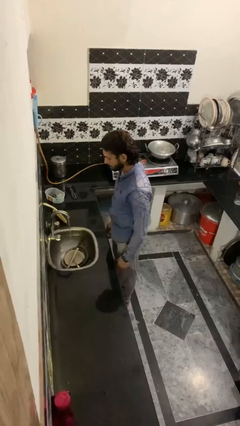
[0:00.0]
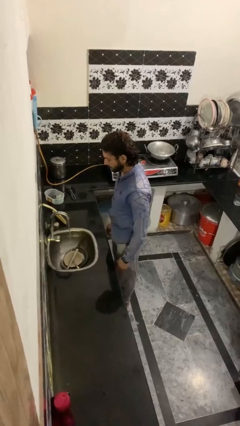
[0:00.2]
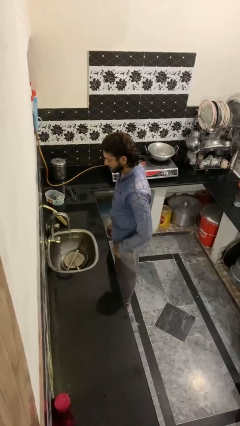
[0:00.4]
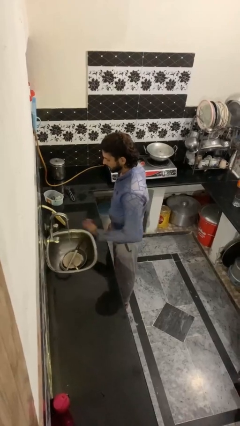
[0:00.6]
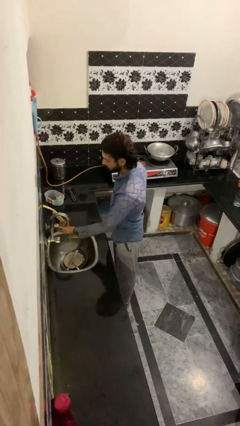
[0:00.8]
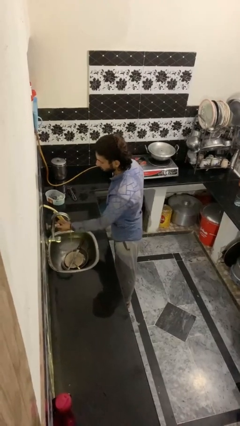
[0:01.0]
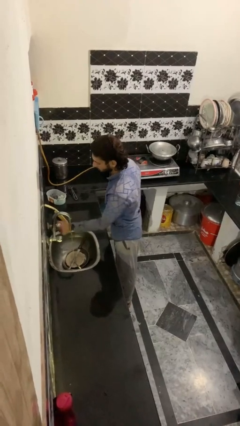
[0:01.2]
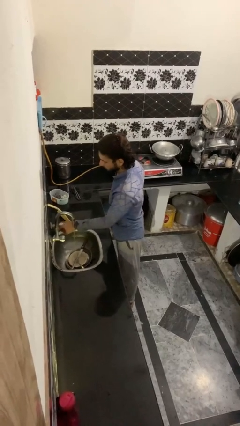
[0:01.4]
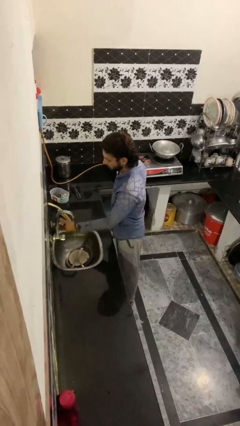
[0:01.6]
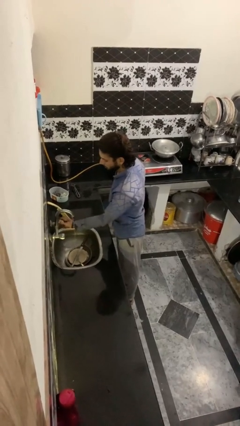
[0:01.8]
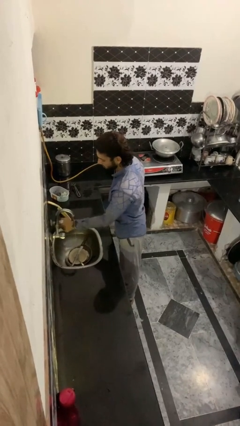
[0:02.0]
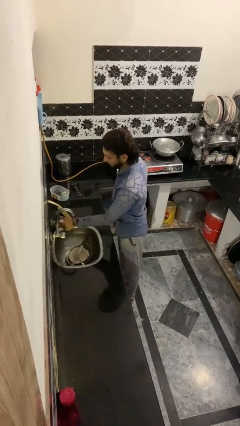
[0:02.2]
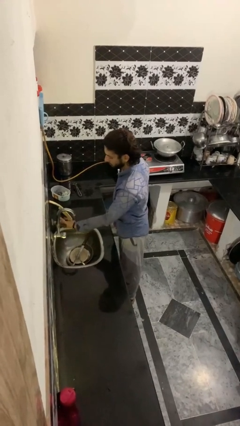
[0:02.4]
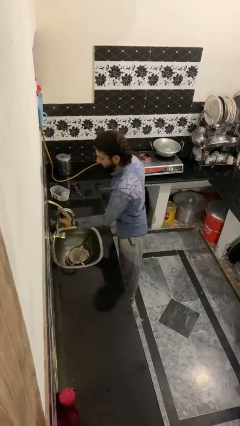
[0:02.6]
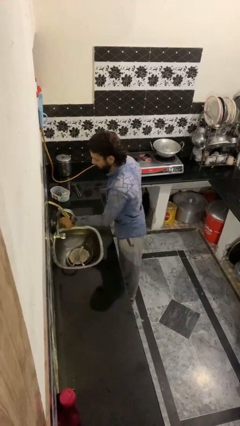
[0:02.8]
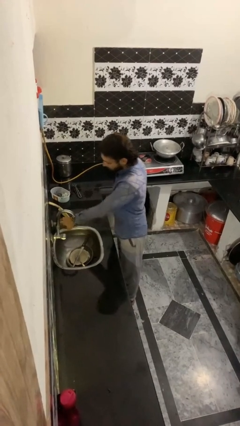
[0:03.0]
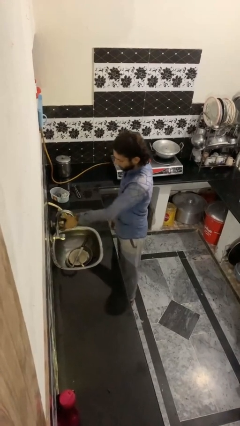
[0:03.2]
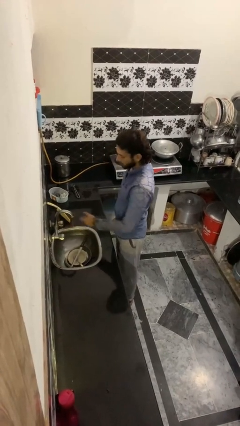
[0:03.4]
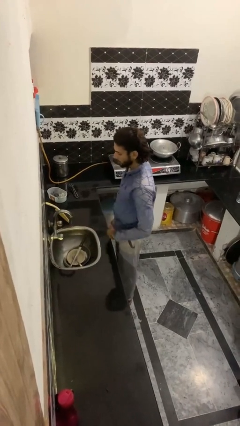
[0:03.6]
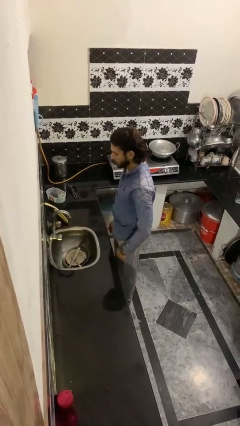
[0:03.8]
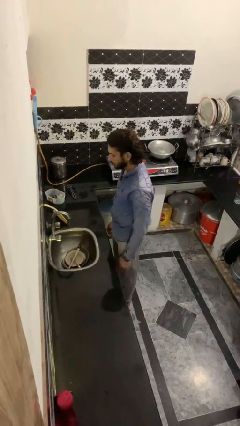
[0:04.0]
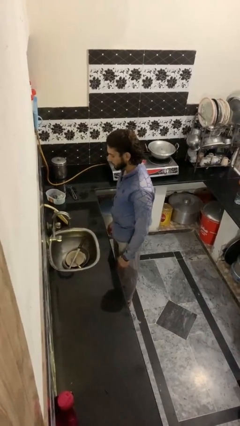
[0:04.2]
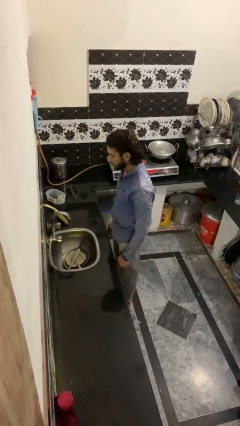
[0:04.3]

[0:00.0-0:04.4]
person turns off faucet

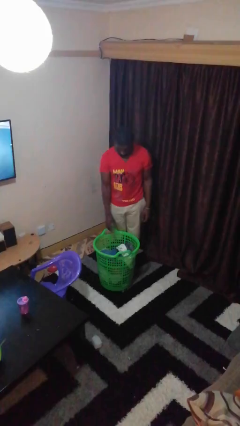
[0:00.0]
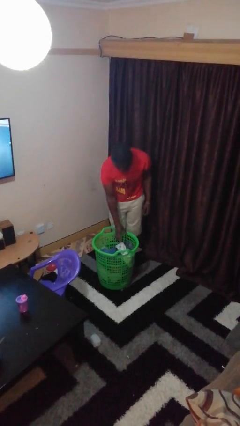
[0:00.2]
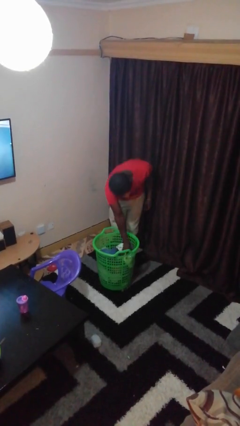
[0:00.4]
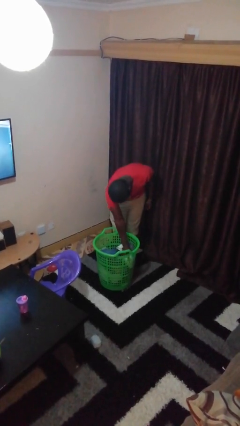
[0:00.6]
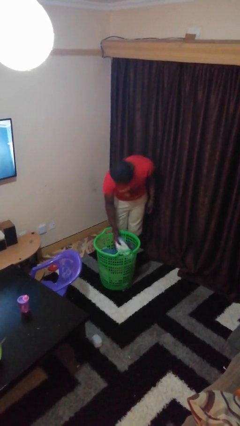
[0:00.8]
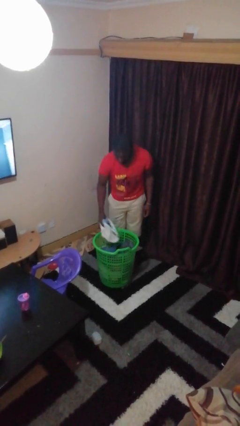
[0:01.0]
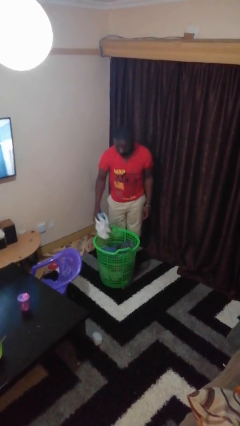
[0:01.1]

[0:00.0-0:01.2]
person takes object from basket

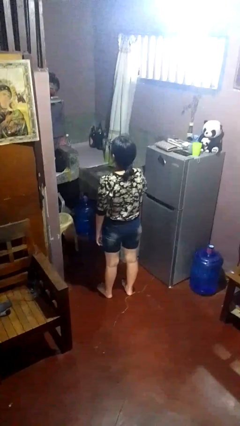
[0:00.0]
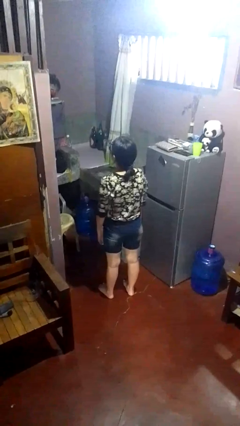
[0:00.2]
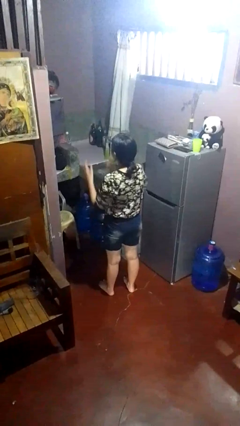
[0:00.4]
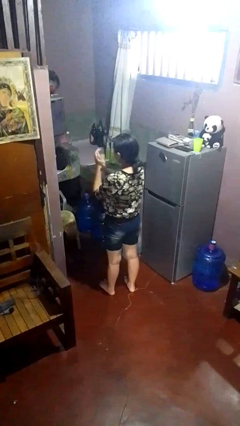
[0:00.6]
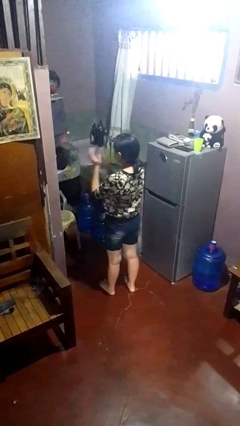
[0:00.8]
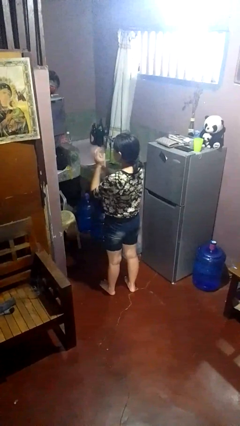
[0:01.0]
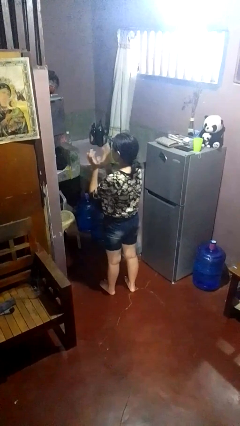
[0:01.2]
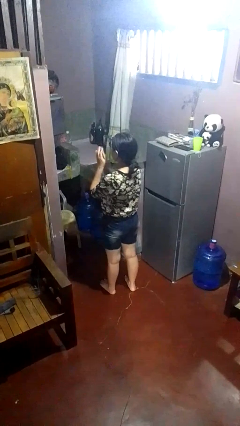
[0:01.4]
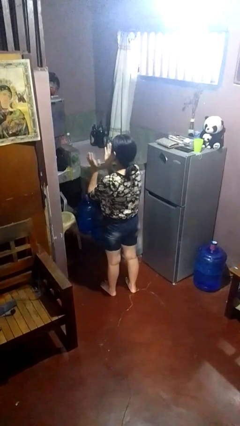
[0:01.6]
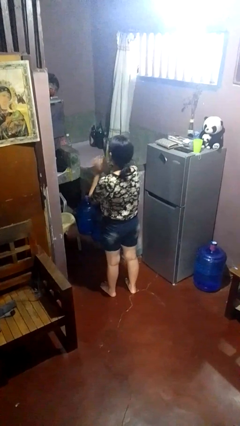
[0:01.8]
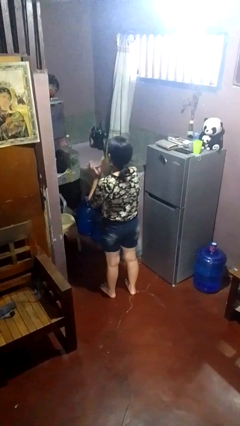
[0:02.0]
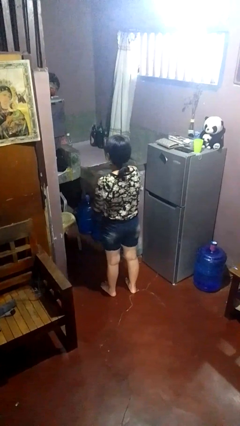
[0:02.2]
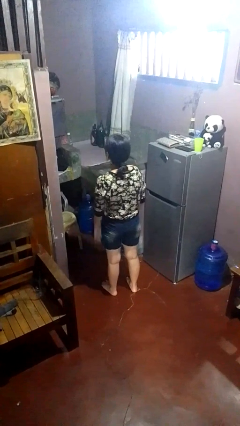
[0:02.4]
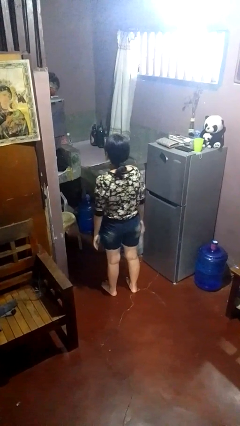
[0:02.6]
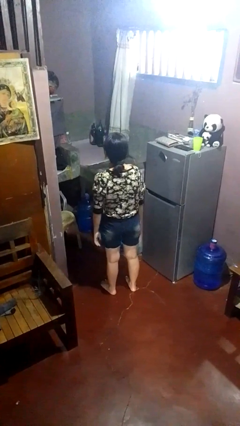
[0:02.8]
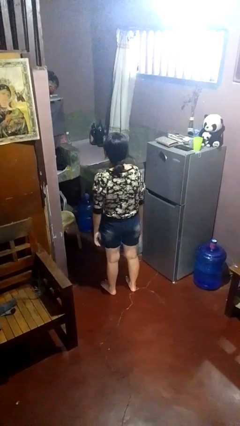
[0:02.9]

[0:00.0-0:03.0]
person claps hands

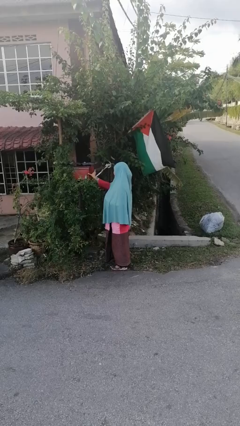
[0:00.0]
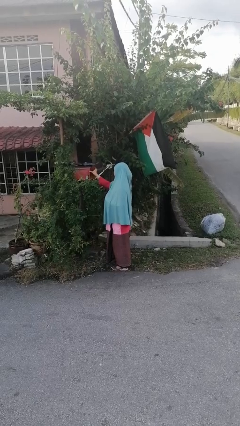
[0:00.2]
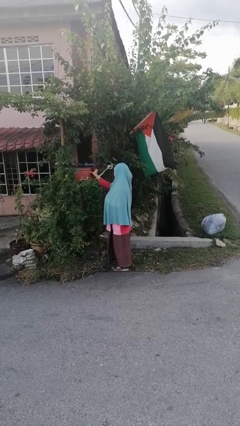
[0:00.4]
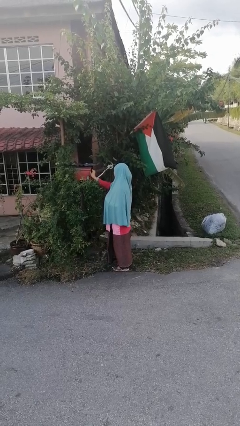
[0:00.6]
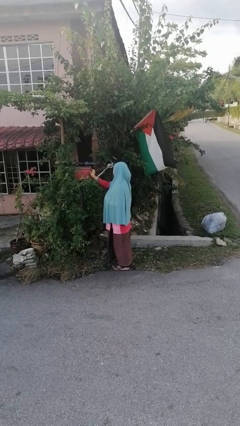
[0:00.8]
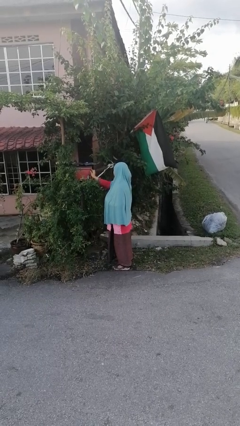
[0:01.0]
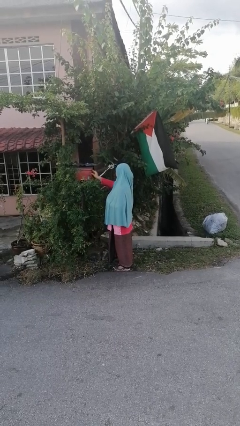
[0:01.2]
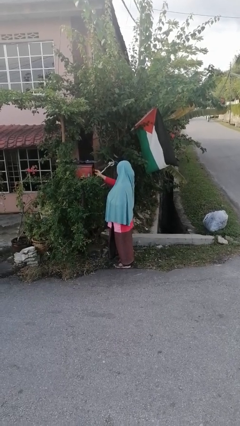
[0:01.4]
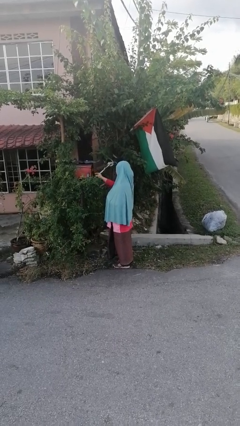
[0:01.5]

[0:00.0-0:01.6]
person closes mailbox

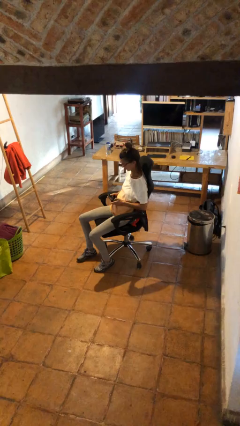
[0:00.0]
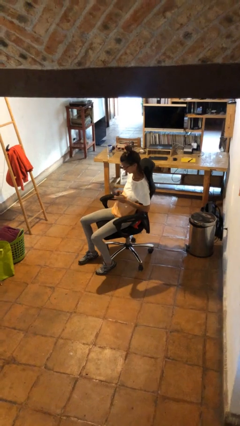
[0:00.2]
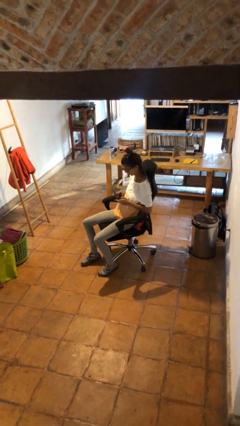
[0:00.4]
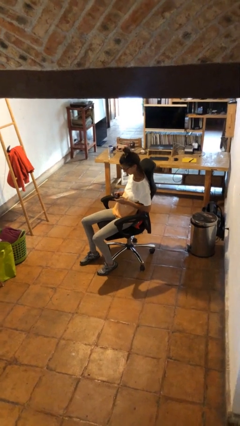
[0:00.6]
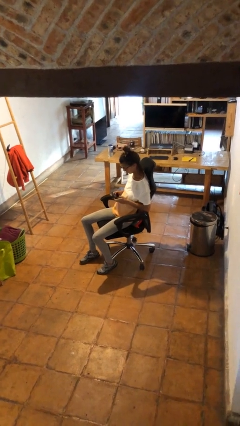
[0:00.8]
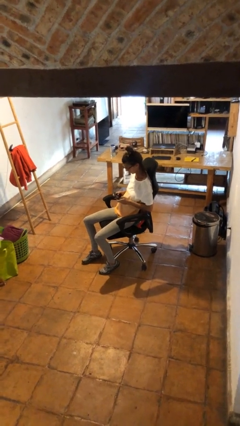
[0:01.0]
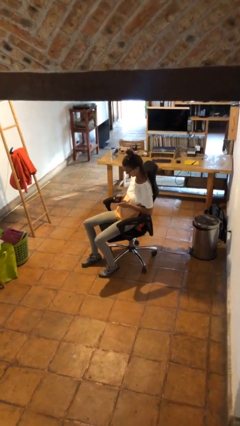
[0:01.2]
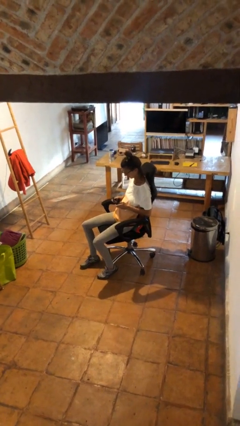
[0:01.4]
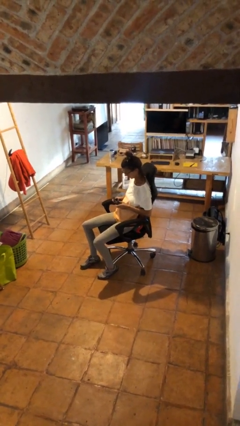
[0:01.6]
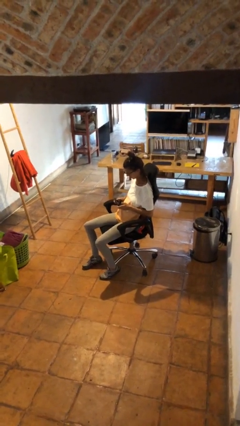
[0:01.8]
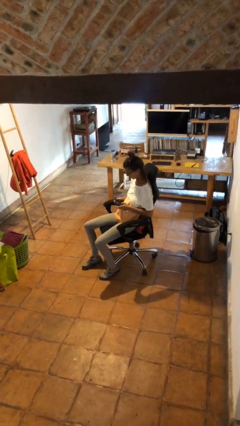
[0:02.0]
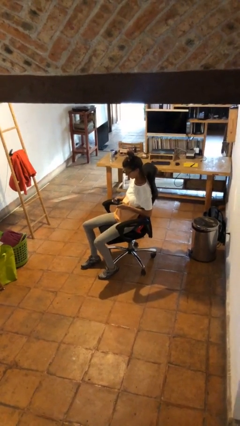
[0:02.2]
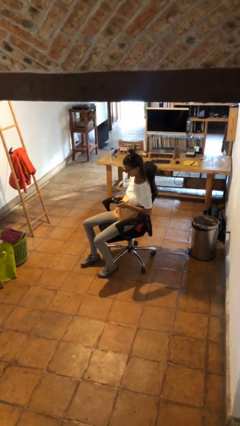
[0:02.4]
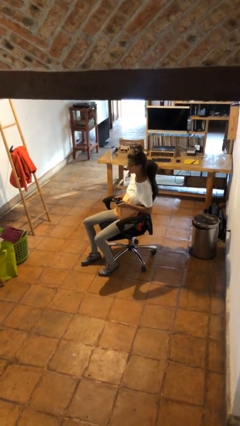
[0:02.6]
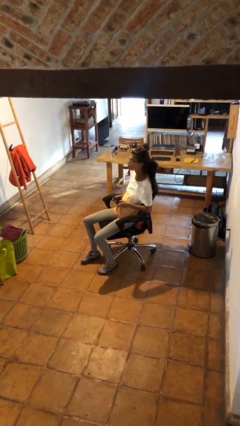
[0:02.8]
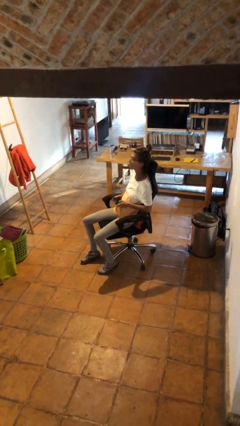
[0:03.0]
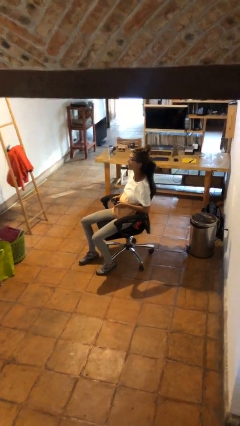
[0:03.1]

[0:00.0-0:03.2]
person interacts with handheld game

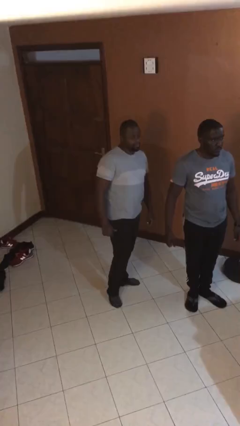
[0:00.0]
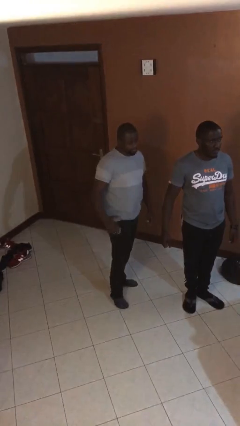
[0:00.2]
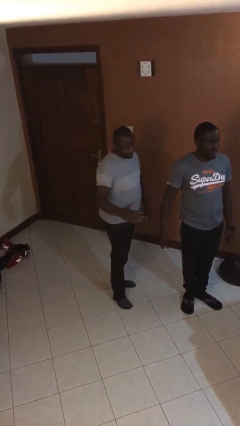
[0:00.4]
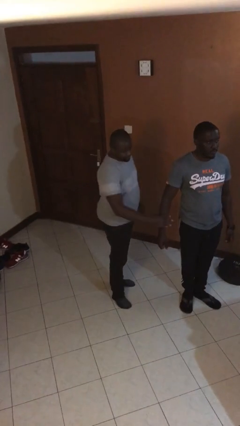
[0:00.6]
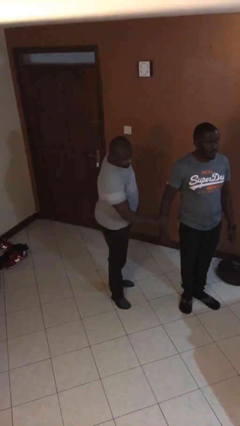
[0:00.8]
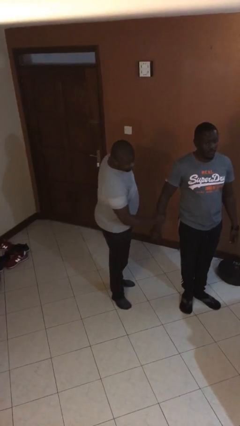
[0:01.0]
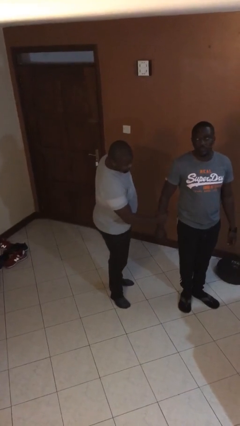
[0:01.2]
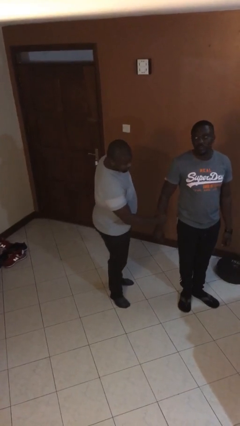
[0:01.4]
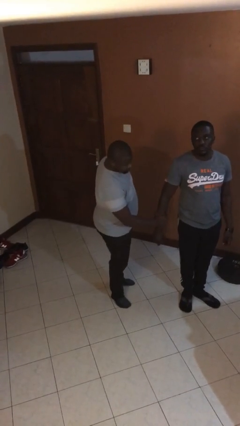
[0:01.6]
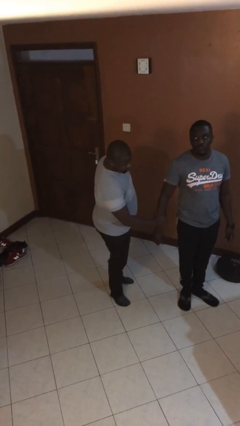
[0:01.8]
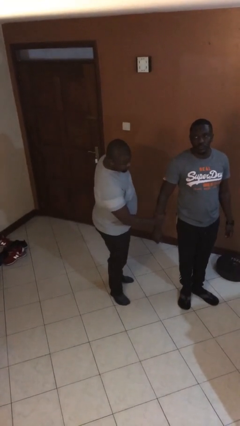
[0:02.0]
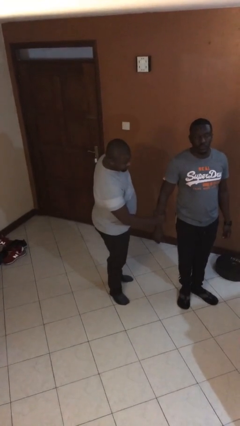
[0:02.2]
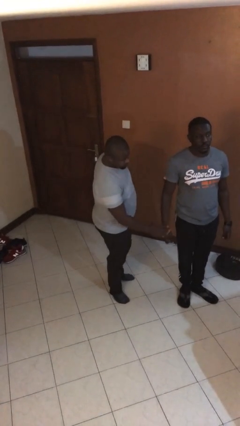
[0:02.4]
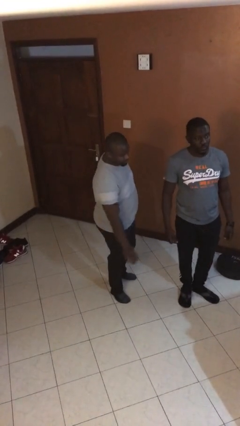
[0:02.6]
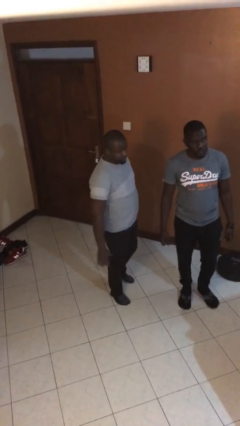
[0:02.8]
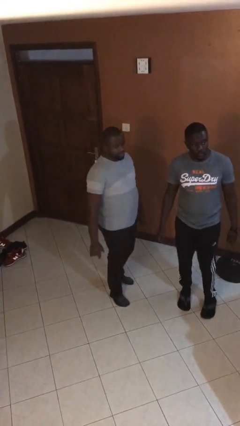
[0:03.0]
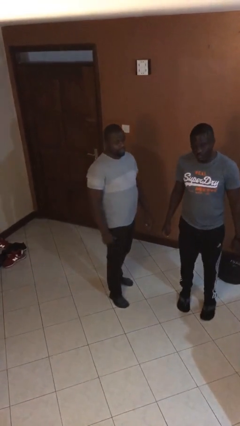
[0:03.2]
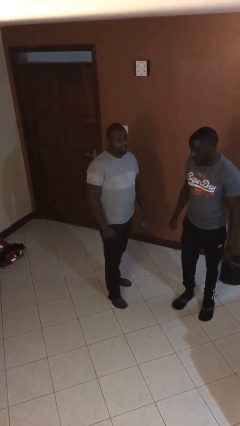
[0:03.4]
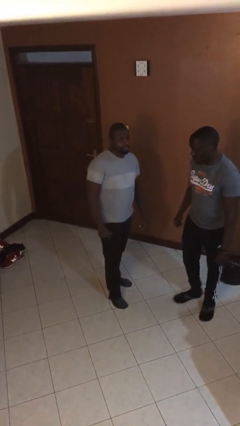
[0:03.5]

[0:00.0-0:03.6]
person grabs person by forearm

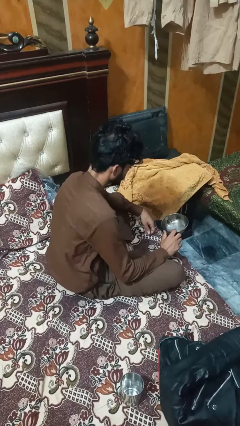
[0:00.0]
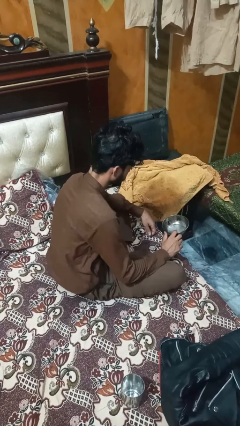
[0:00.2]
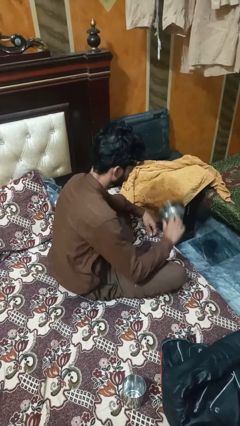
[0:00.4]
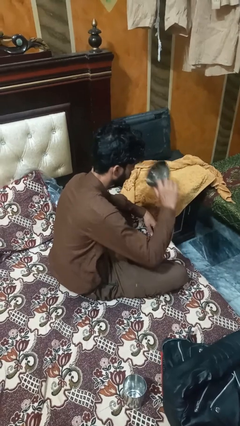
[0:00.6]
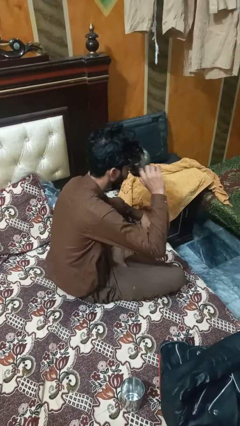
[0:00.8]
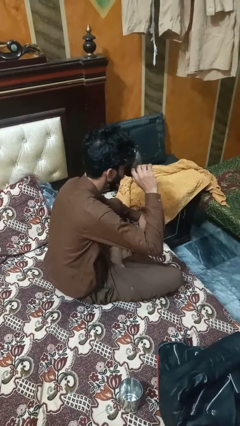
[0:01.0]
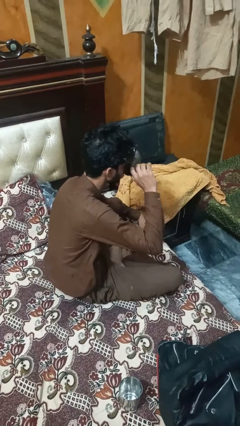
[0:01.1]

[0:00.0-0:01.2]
person drinks from shotglass
